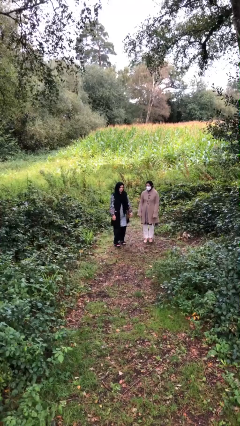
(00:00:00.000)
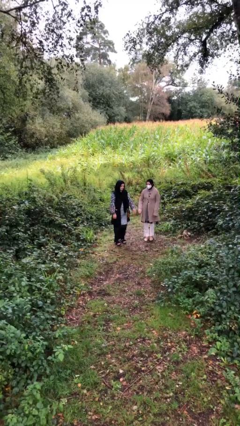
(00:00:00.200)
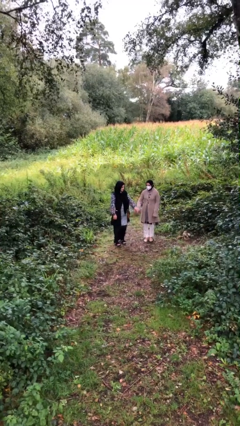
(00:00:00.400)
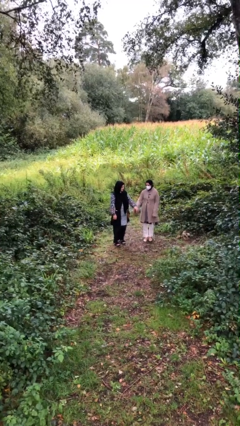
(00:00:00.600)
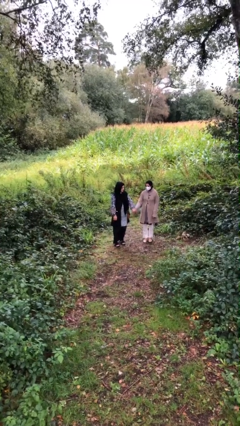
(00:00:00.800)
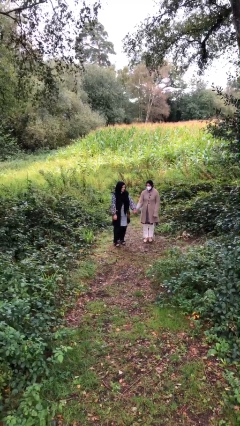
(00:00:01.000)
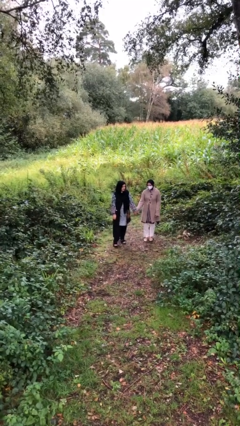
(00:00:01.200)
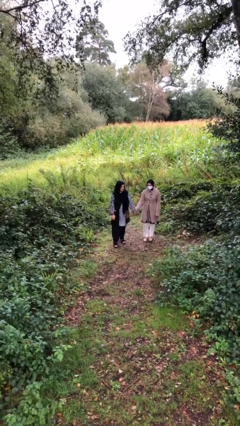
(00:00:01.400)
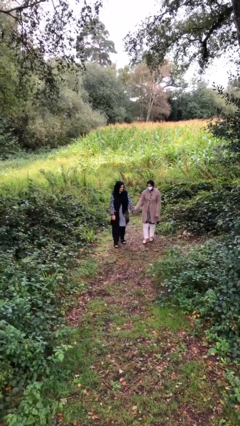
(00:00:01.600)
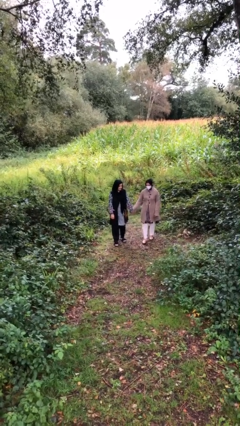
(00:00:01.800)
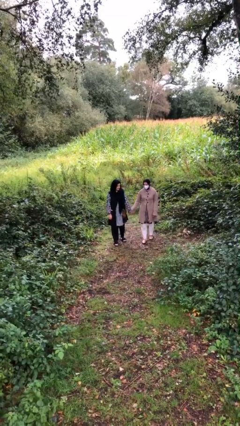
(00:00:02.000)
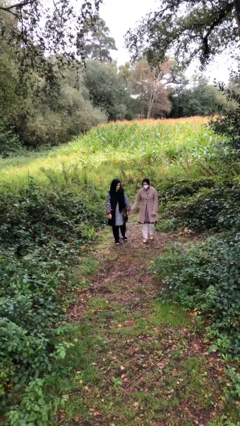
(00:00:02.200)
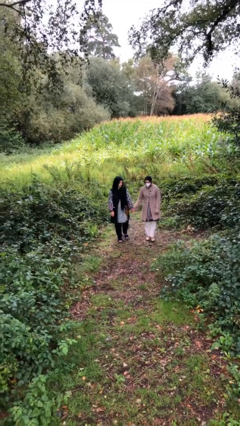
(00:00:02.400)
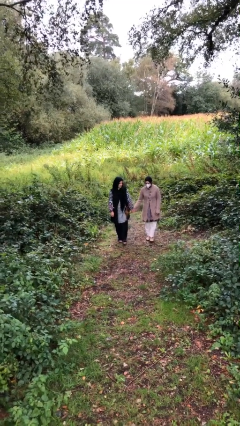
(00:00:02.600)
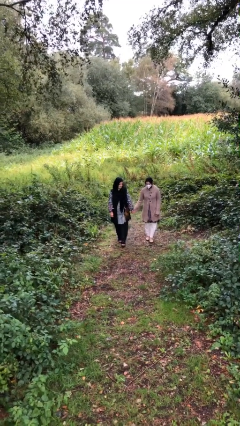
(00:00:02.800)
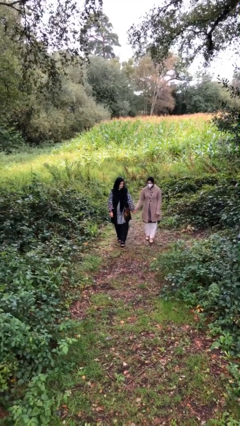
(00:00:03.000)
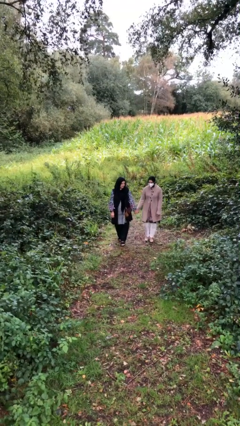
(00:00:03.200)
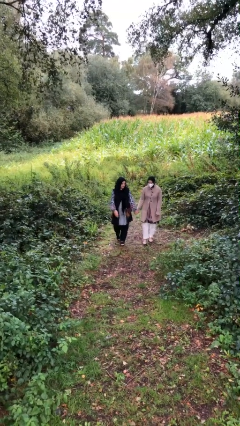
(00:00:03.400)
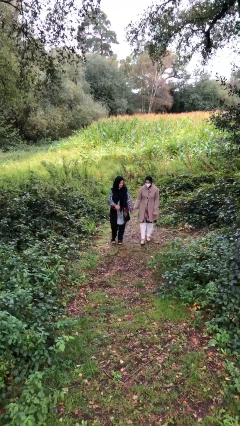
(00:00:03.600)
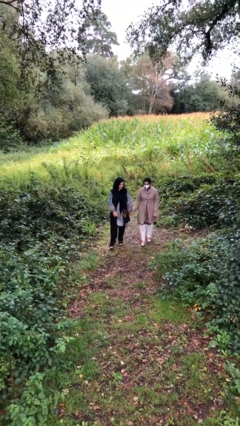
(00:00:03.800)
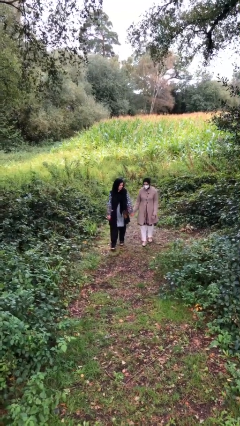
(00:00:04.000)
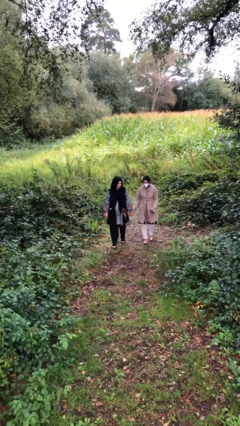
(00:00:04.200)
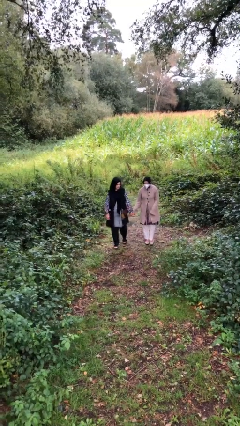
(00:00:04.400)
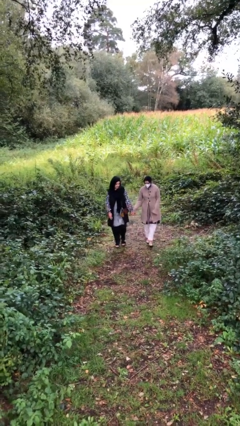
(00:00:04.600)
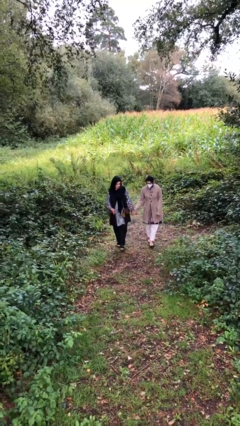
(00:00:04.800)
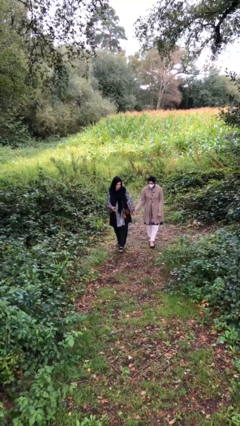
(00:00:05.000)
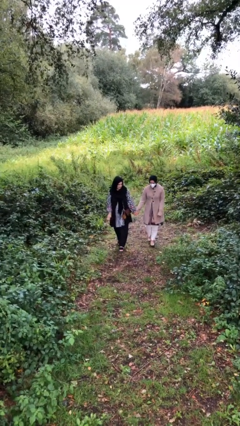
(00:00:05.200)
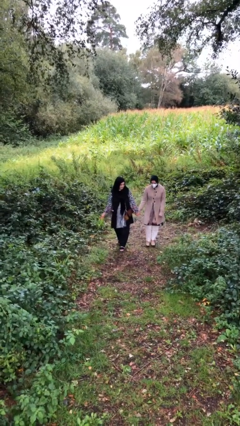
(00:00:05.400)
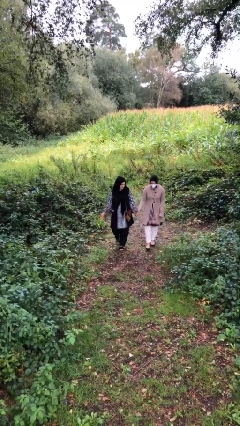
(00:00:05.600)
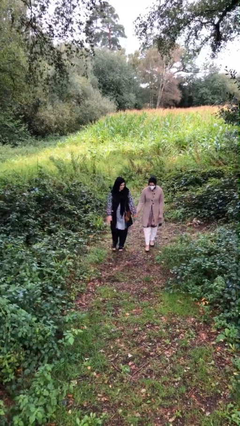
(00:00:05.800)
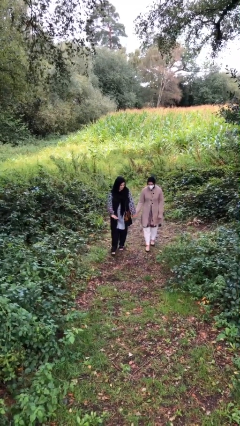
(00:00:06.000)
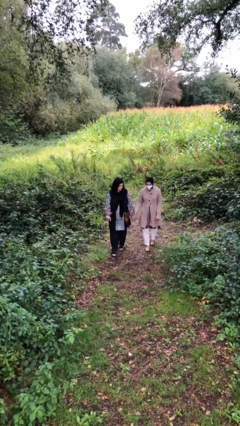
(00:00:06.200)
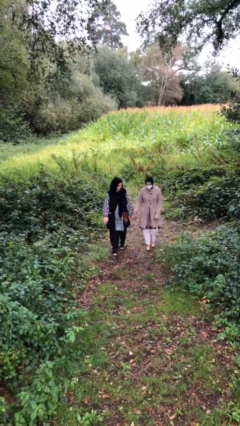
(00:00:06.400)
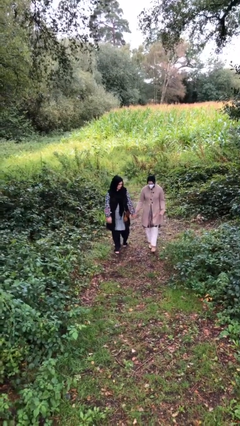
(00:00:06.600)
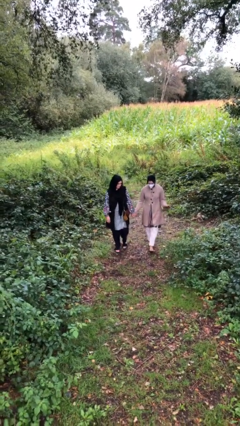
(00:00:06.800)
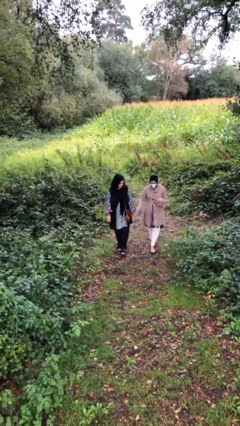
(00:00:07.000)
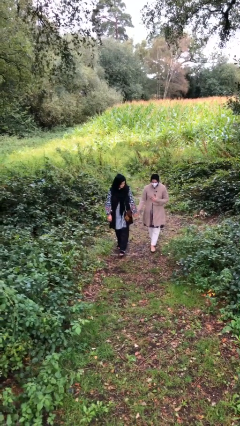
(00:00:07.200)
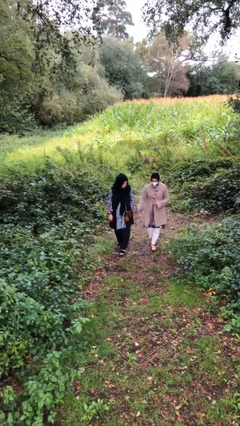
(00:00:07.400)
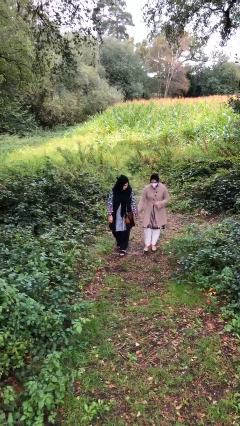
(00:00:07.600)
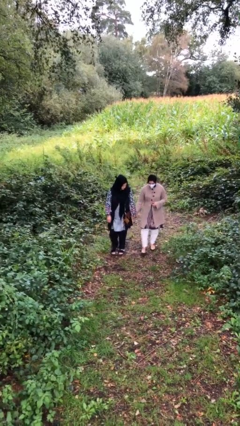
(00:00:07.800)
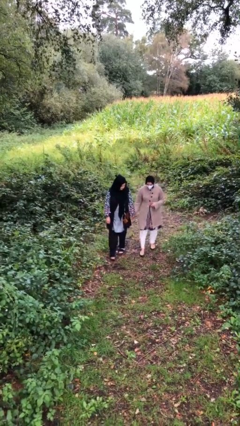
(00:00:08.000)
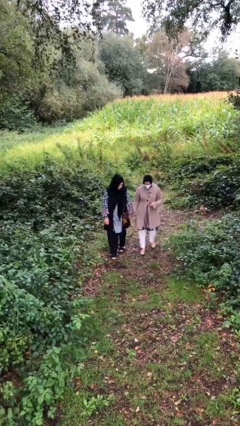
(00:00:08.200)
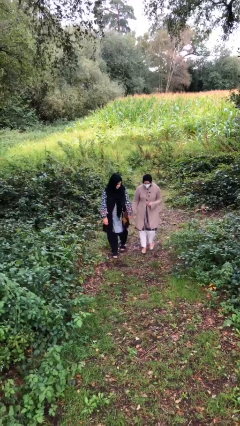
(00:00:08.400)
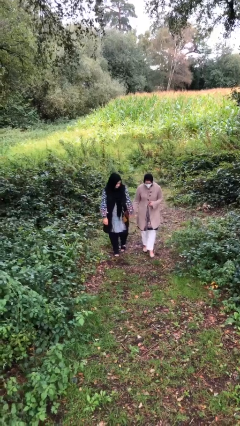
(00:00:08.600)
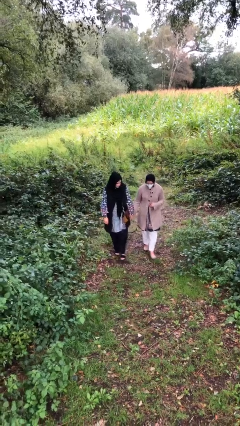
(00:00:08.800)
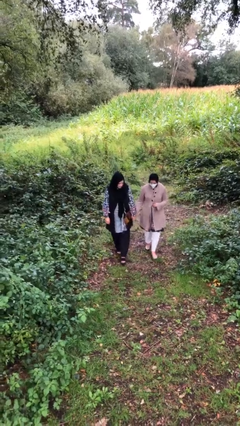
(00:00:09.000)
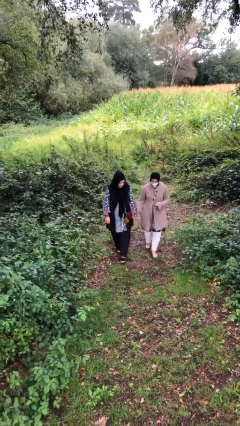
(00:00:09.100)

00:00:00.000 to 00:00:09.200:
person holds hand

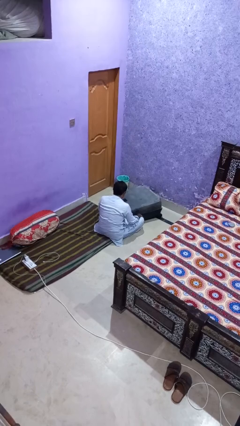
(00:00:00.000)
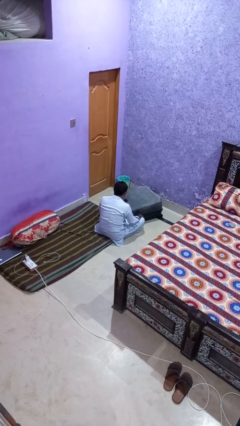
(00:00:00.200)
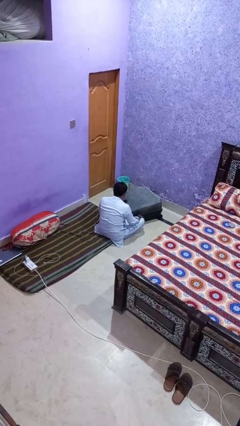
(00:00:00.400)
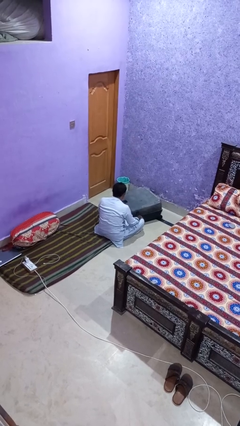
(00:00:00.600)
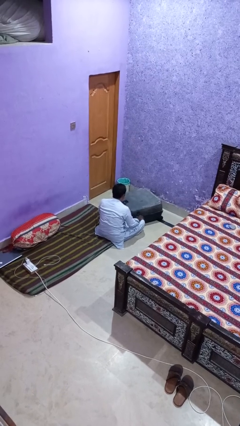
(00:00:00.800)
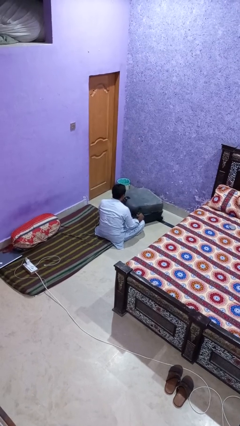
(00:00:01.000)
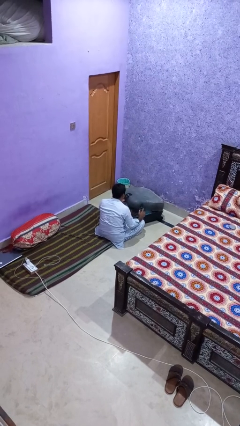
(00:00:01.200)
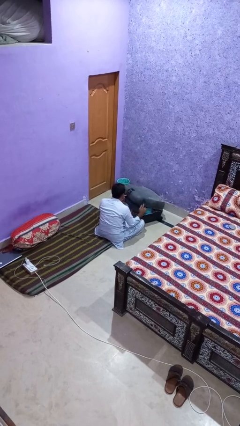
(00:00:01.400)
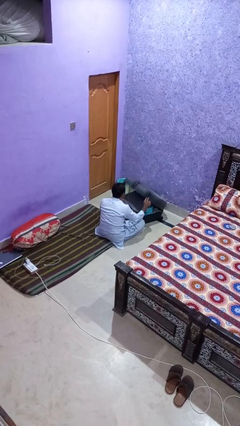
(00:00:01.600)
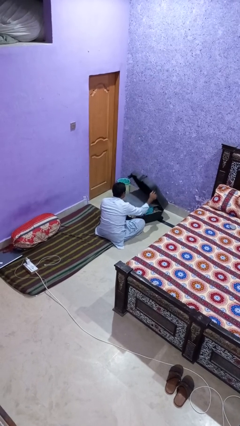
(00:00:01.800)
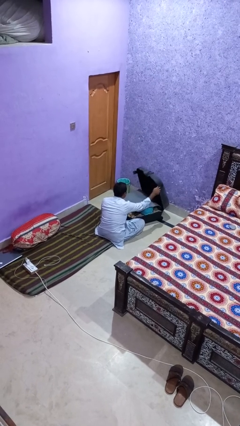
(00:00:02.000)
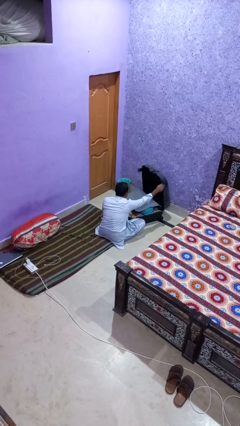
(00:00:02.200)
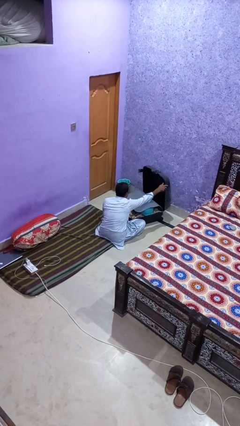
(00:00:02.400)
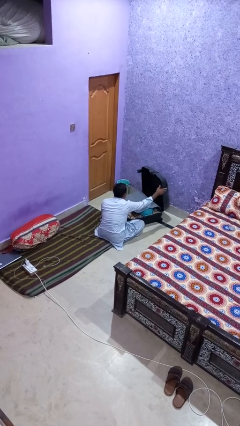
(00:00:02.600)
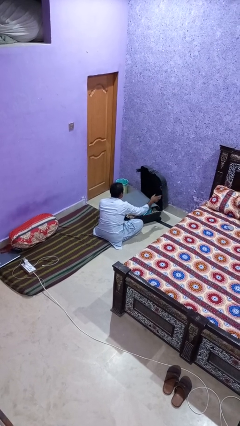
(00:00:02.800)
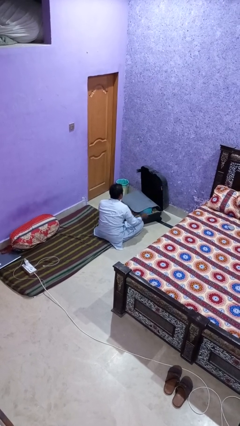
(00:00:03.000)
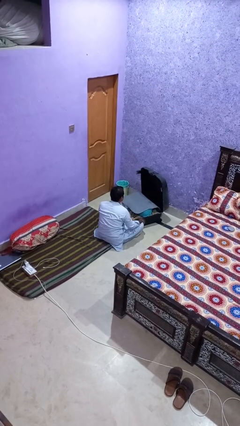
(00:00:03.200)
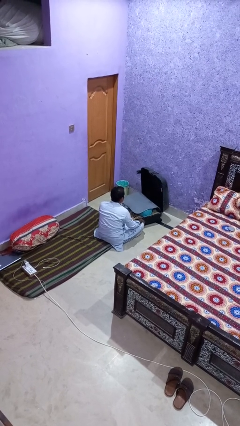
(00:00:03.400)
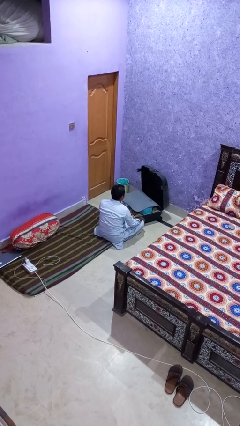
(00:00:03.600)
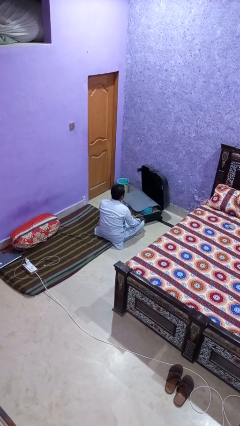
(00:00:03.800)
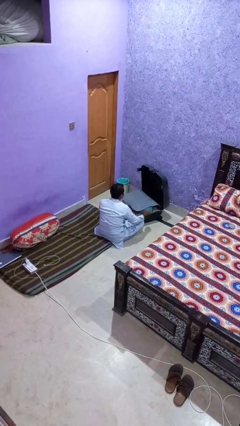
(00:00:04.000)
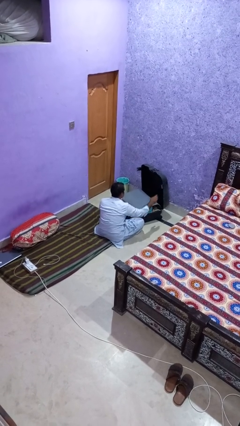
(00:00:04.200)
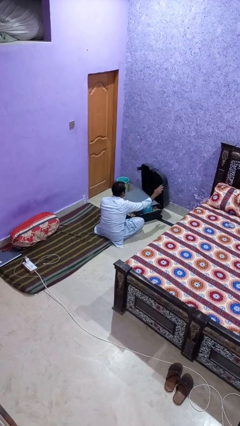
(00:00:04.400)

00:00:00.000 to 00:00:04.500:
person opens suitcase

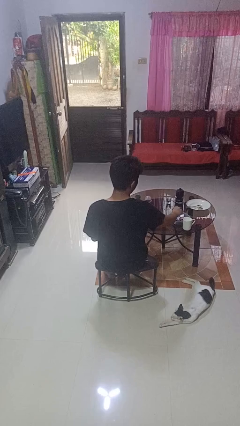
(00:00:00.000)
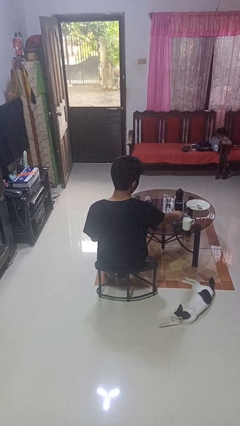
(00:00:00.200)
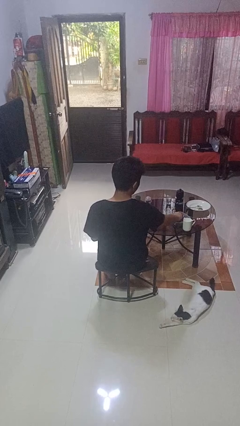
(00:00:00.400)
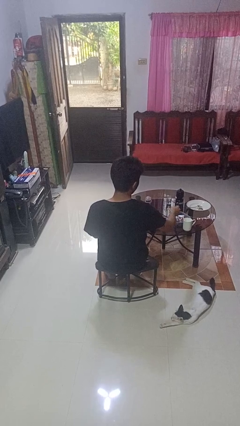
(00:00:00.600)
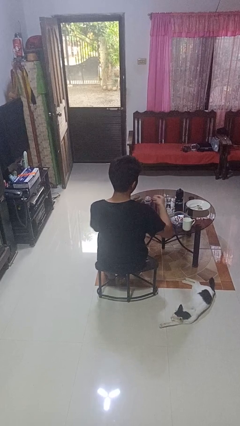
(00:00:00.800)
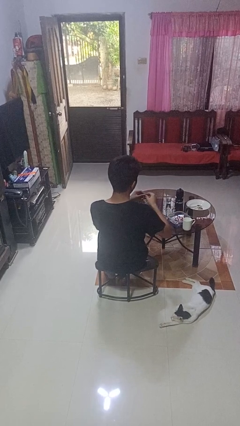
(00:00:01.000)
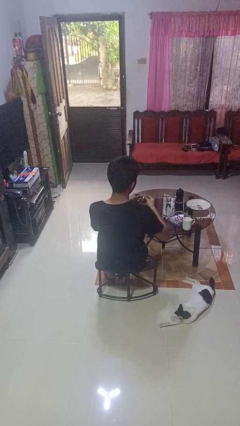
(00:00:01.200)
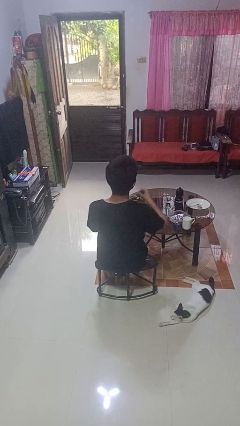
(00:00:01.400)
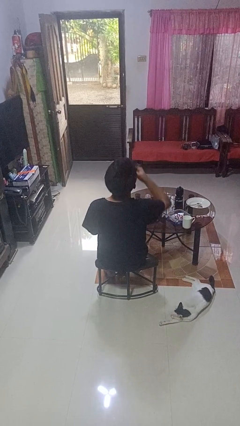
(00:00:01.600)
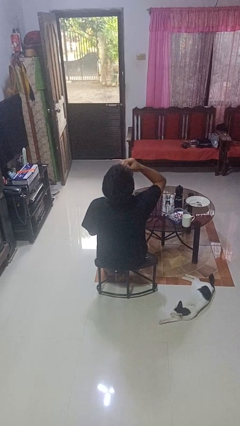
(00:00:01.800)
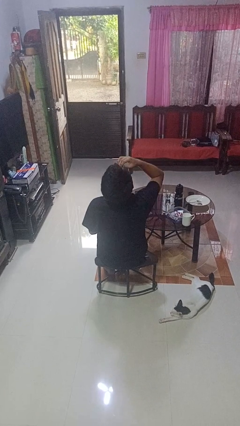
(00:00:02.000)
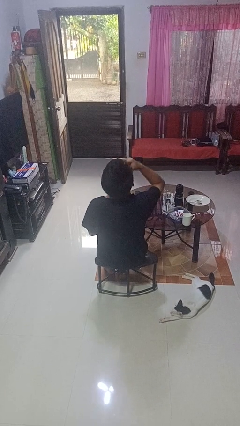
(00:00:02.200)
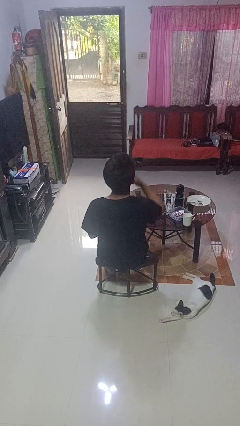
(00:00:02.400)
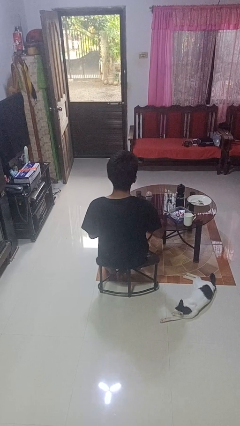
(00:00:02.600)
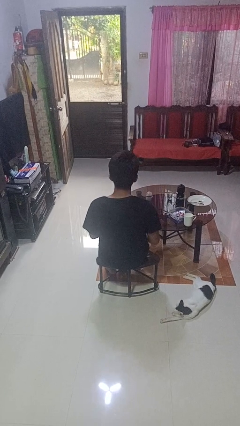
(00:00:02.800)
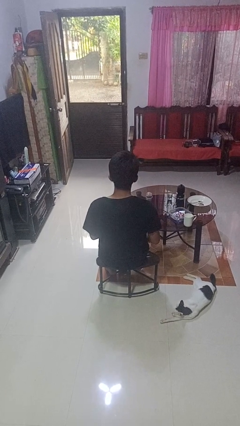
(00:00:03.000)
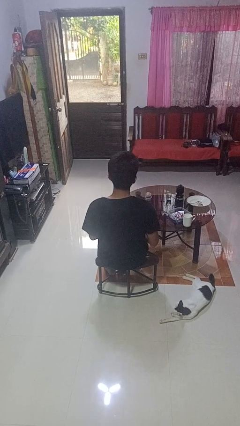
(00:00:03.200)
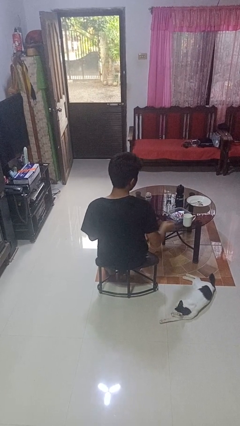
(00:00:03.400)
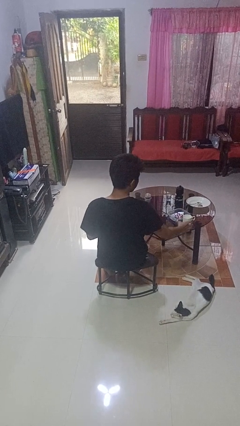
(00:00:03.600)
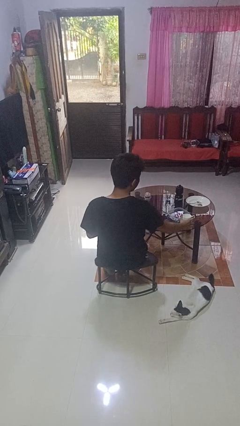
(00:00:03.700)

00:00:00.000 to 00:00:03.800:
person takes medicine pills

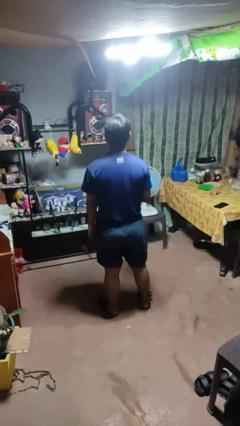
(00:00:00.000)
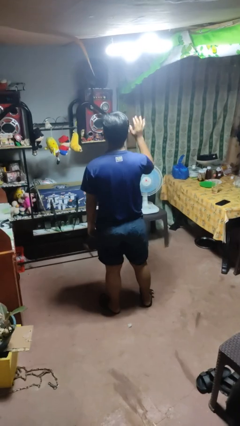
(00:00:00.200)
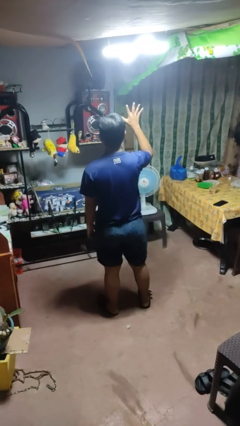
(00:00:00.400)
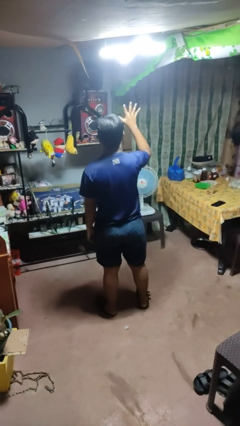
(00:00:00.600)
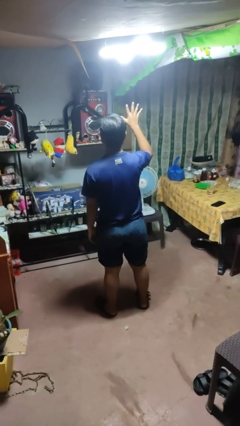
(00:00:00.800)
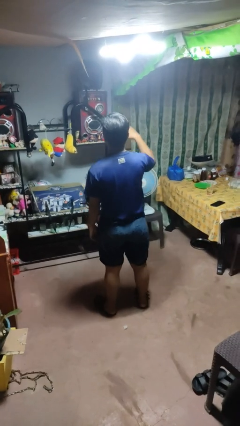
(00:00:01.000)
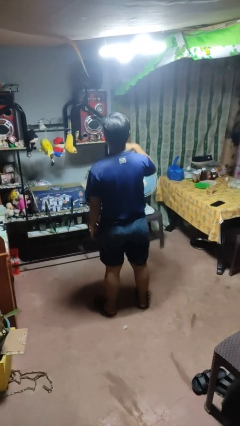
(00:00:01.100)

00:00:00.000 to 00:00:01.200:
person gestures number five
